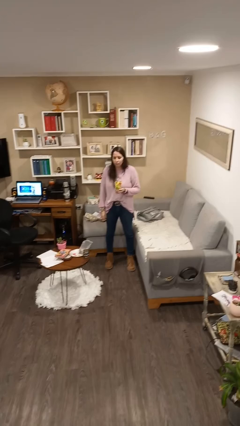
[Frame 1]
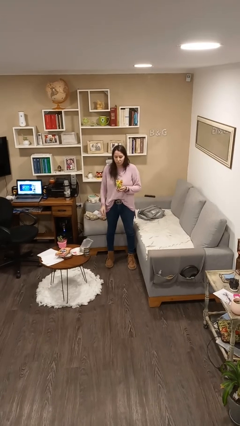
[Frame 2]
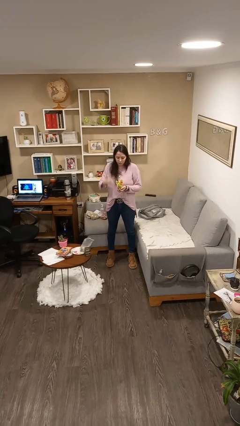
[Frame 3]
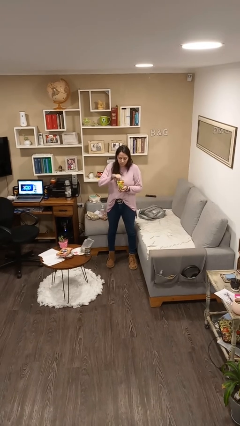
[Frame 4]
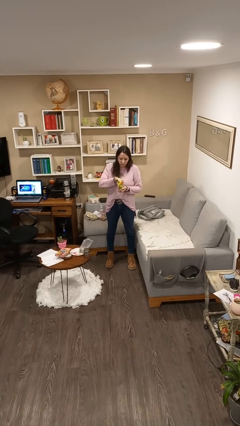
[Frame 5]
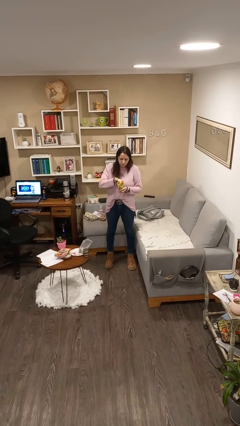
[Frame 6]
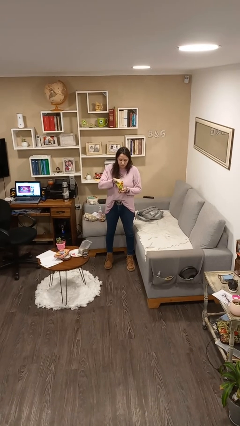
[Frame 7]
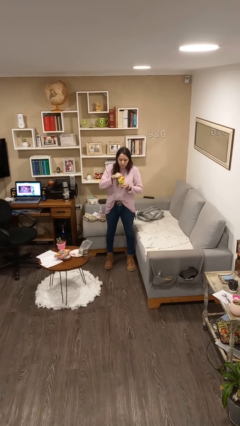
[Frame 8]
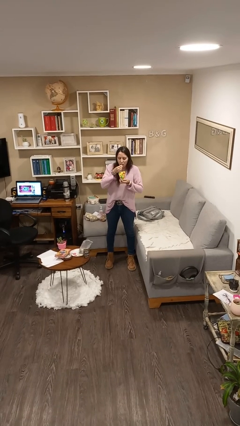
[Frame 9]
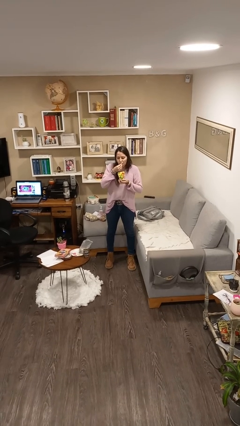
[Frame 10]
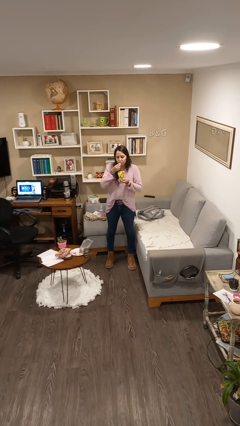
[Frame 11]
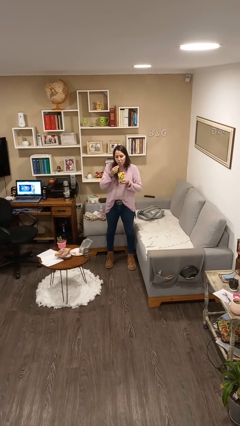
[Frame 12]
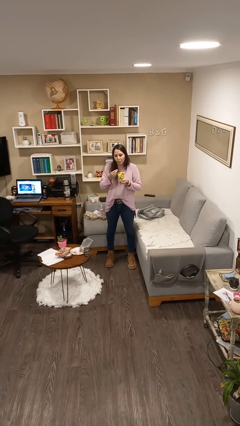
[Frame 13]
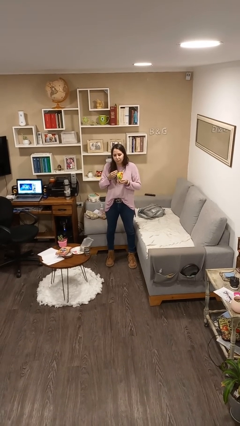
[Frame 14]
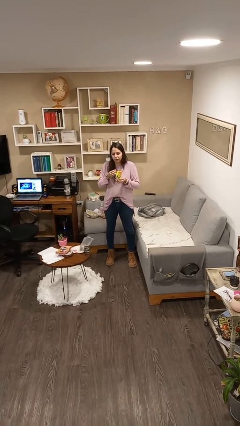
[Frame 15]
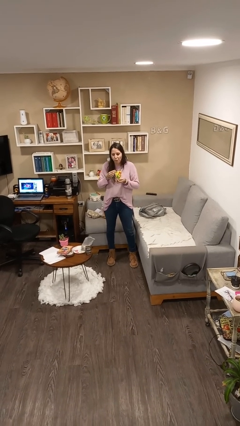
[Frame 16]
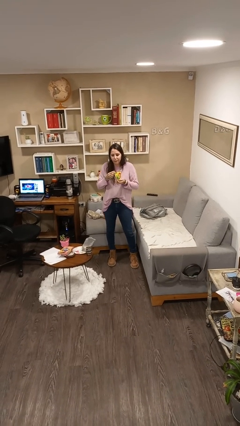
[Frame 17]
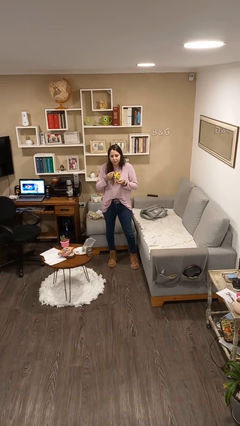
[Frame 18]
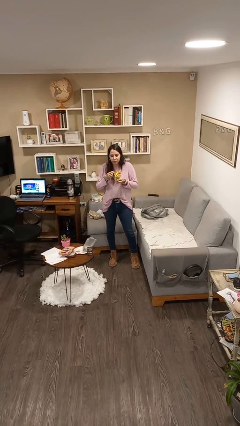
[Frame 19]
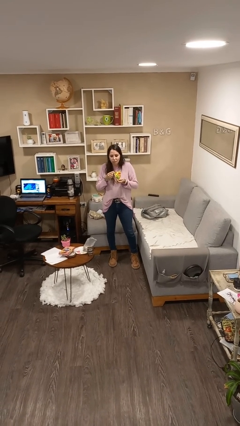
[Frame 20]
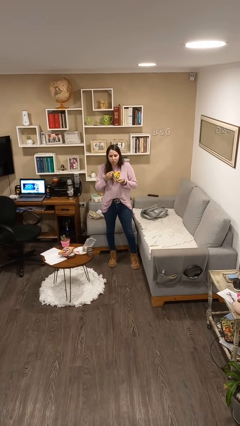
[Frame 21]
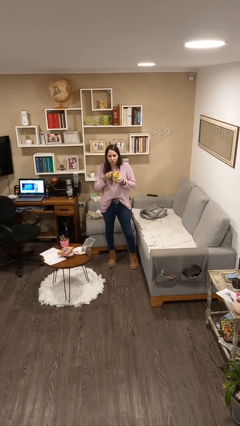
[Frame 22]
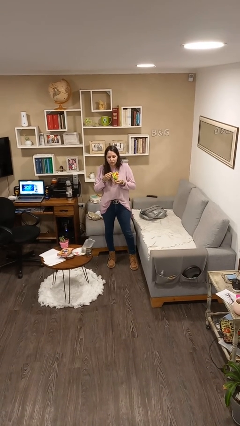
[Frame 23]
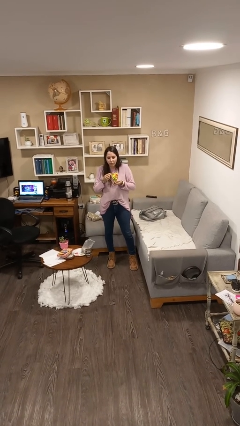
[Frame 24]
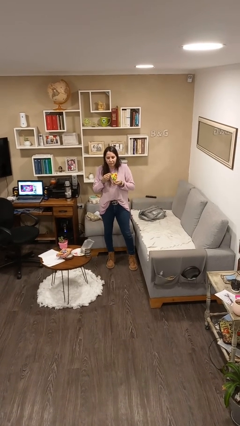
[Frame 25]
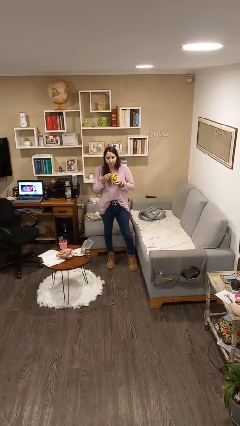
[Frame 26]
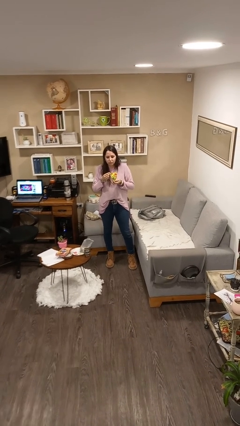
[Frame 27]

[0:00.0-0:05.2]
person eats snack from bag

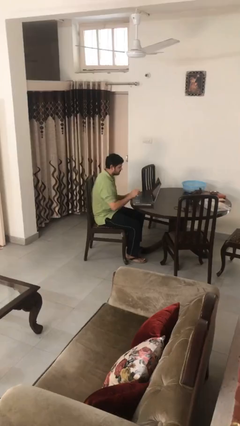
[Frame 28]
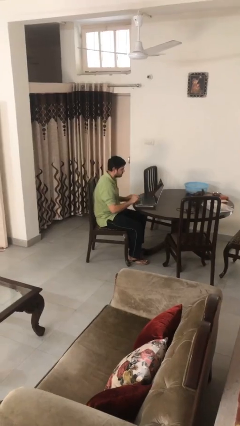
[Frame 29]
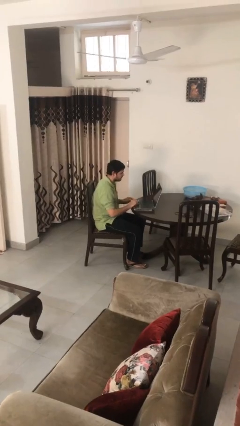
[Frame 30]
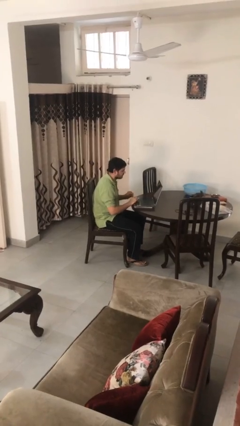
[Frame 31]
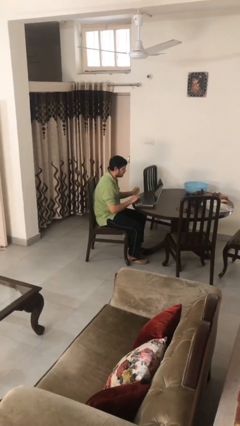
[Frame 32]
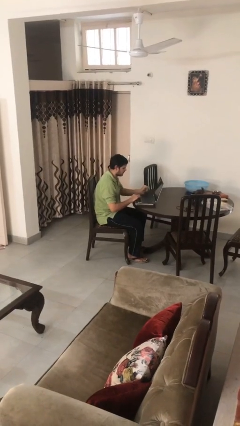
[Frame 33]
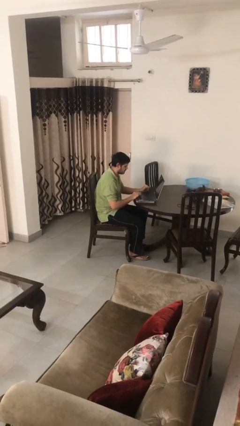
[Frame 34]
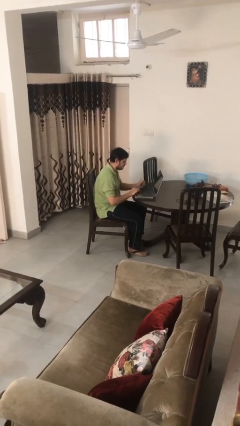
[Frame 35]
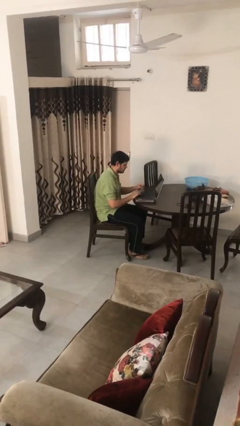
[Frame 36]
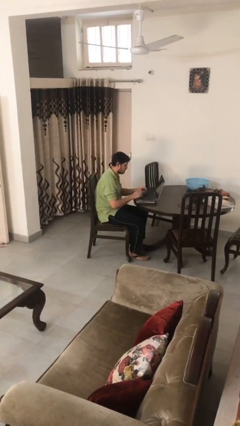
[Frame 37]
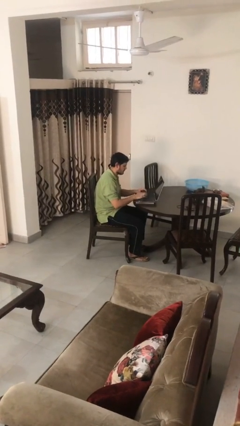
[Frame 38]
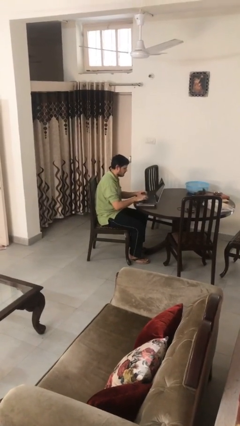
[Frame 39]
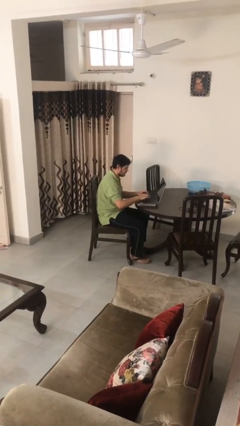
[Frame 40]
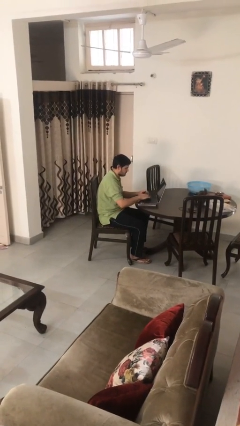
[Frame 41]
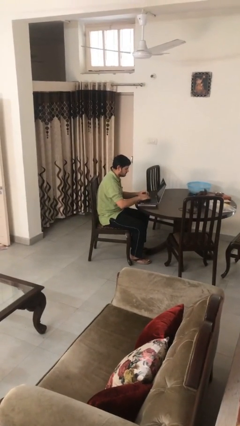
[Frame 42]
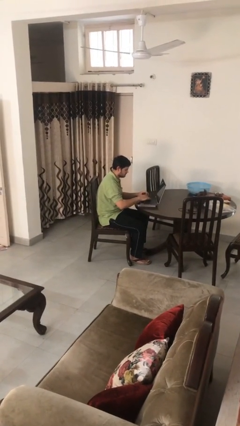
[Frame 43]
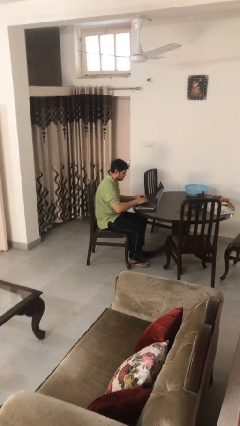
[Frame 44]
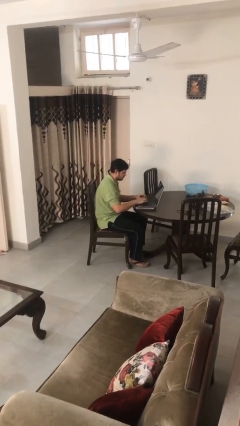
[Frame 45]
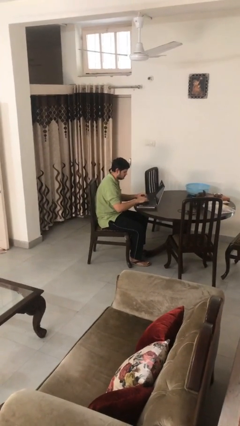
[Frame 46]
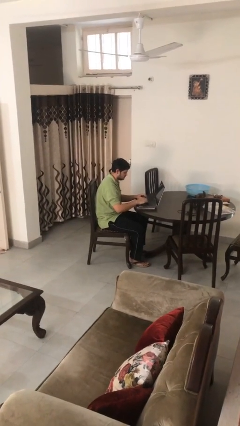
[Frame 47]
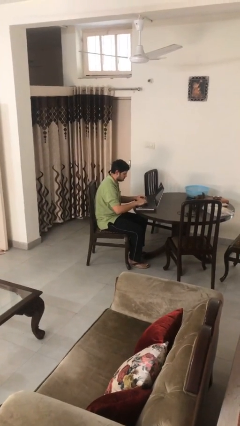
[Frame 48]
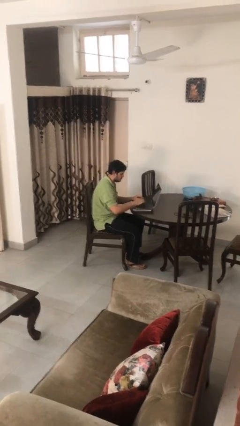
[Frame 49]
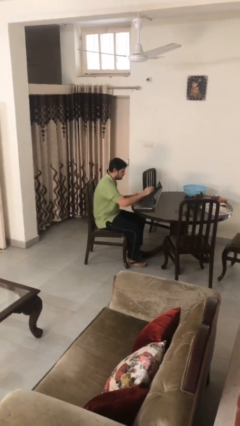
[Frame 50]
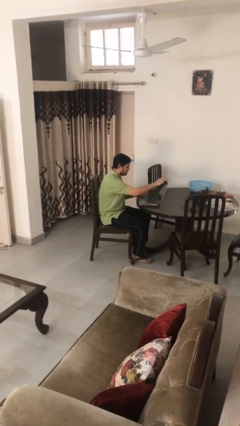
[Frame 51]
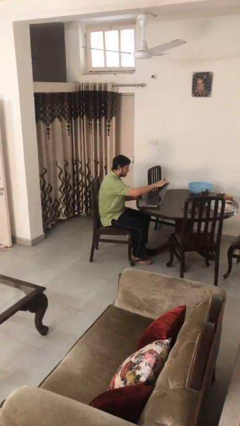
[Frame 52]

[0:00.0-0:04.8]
person interacts with laptop

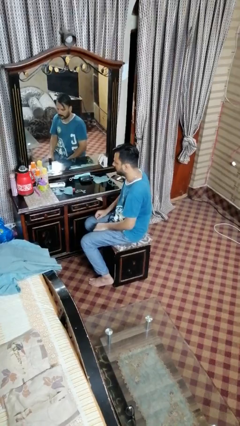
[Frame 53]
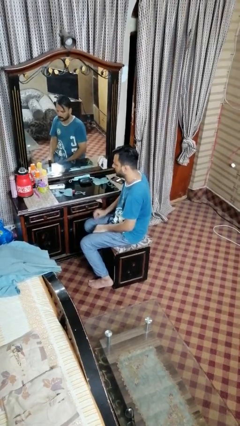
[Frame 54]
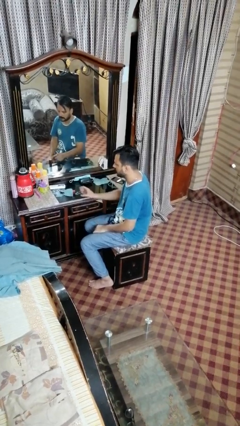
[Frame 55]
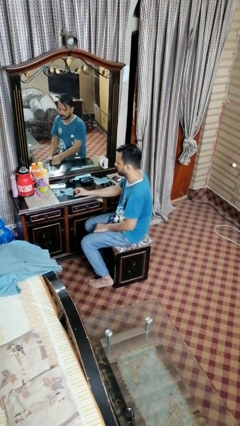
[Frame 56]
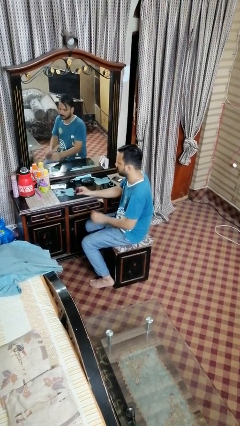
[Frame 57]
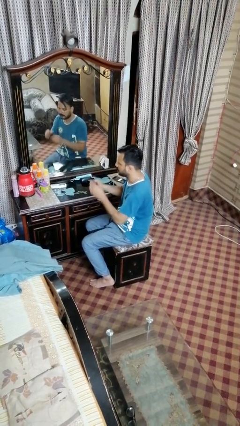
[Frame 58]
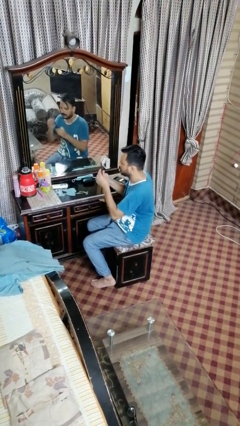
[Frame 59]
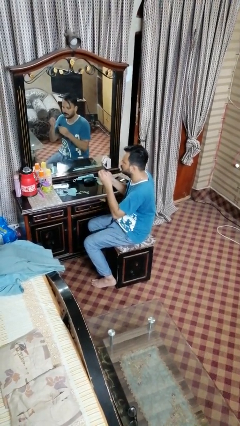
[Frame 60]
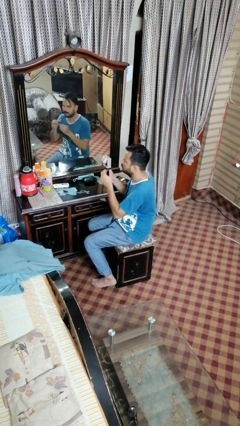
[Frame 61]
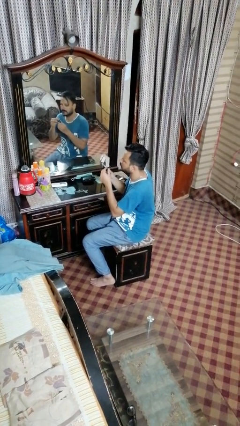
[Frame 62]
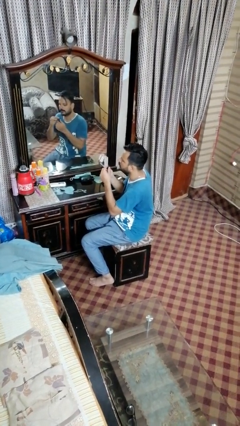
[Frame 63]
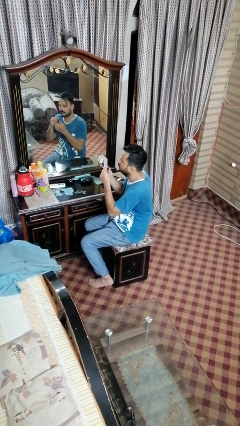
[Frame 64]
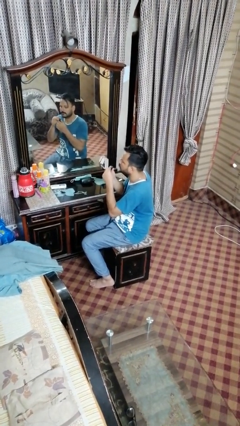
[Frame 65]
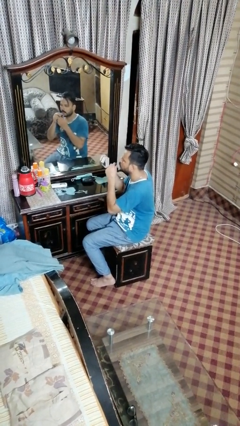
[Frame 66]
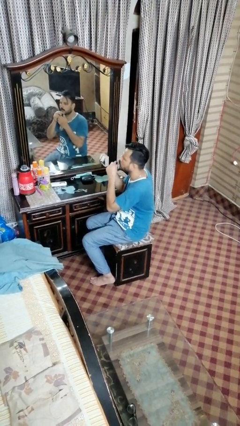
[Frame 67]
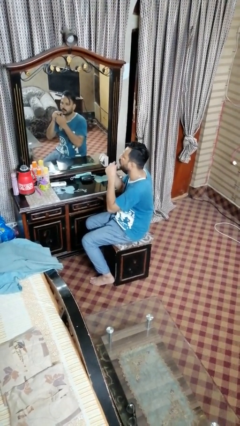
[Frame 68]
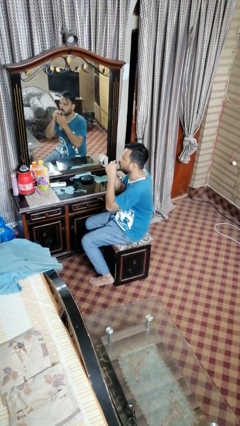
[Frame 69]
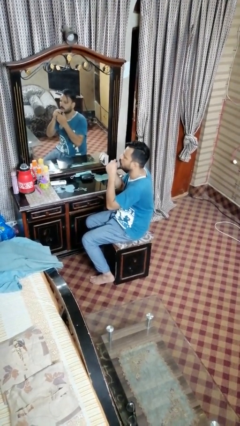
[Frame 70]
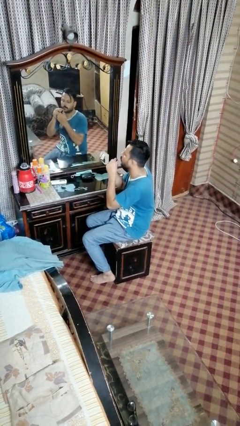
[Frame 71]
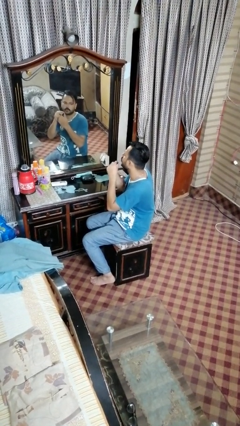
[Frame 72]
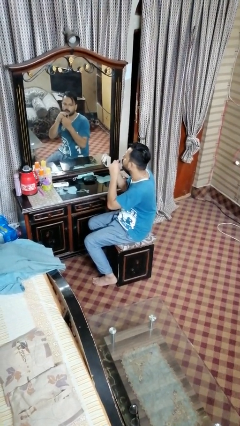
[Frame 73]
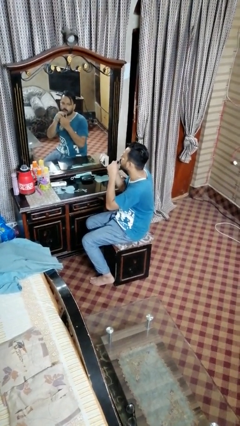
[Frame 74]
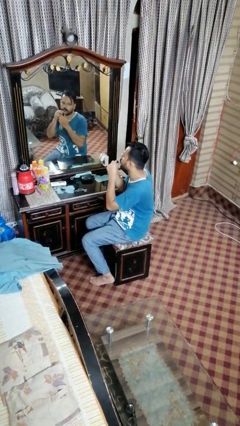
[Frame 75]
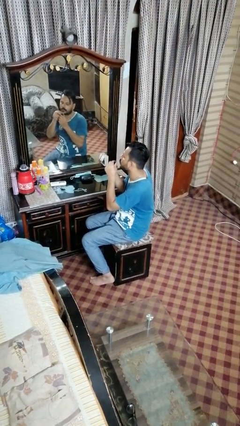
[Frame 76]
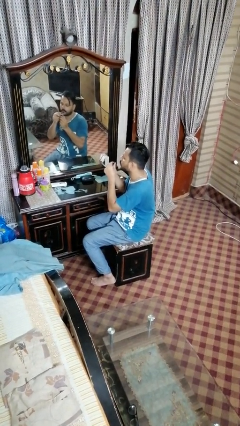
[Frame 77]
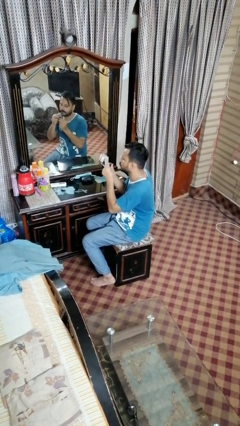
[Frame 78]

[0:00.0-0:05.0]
person applies lip makeup

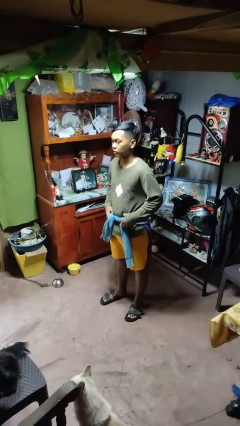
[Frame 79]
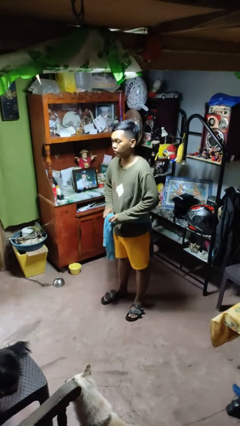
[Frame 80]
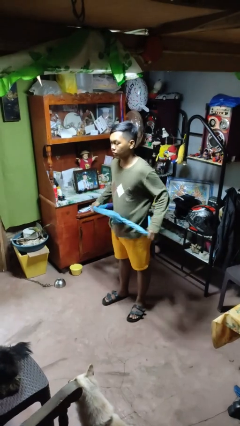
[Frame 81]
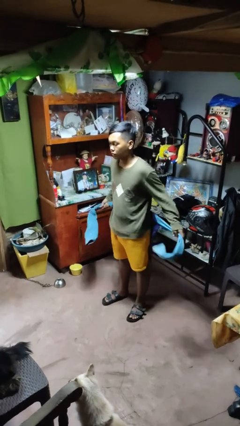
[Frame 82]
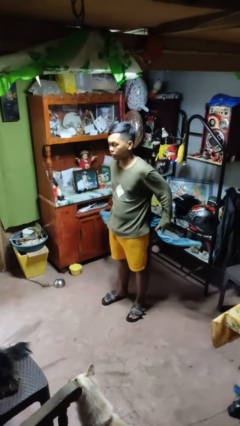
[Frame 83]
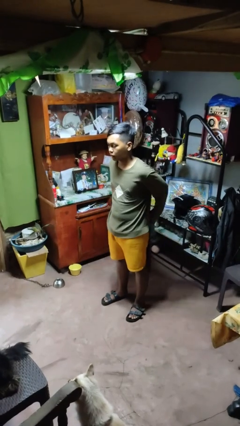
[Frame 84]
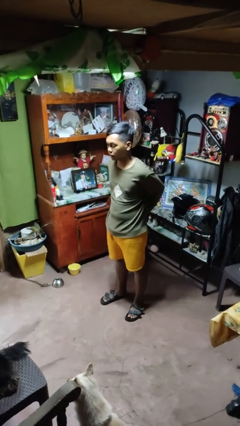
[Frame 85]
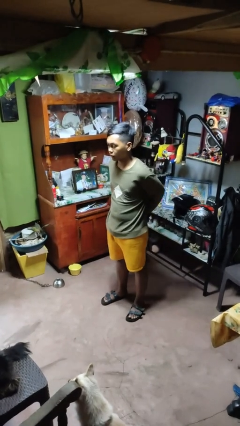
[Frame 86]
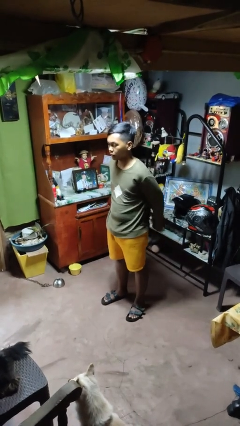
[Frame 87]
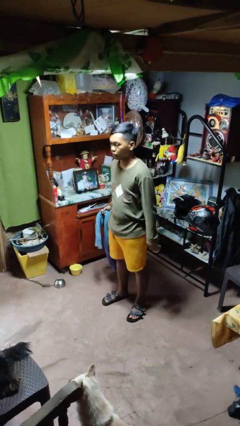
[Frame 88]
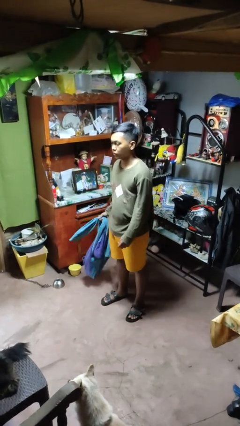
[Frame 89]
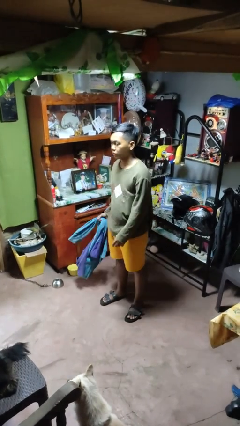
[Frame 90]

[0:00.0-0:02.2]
person unties jacket around waist

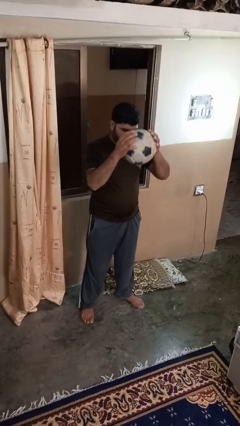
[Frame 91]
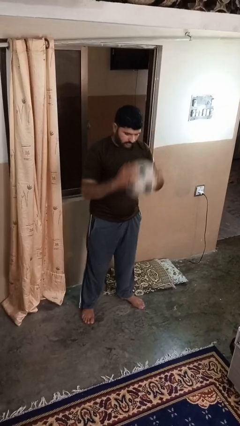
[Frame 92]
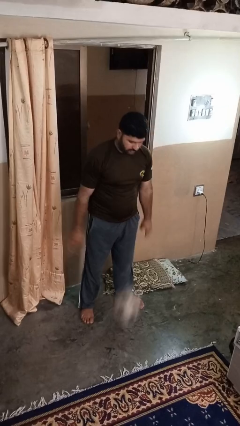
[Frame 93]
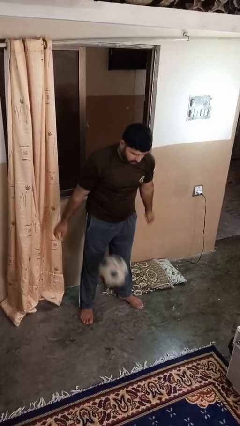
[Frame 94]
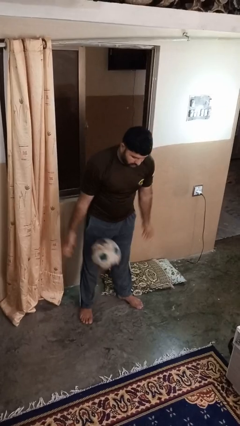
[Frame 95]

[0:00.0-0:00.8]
person bounces ball on floor
